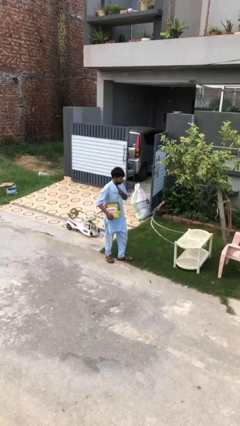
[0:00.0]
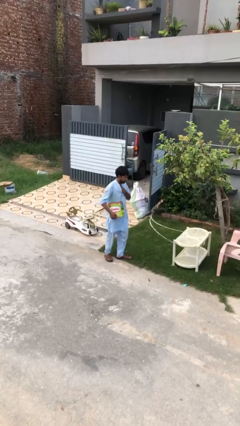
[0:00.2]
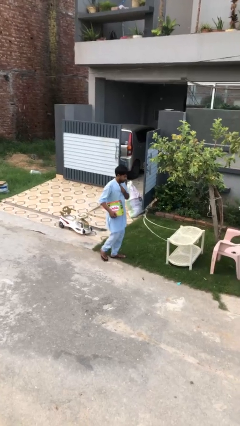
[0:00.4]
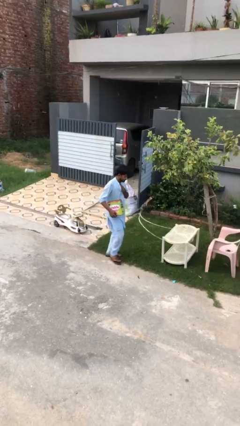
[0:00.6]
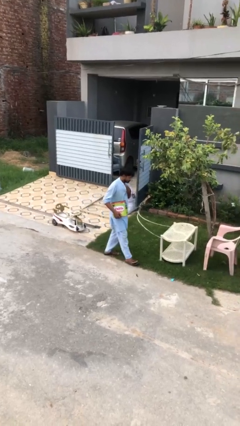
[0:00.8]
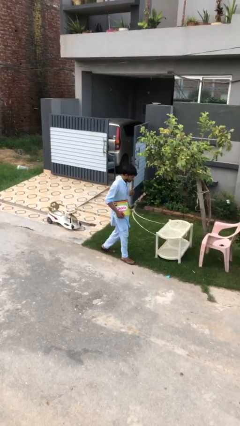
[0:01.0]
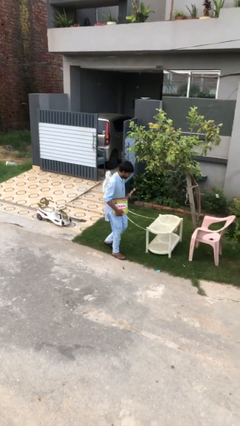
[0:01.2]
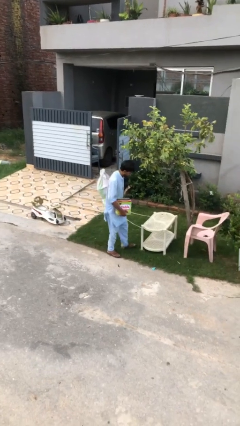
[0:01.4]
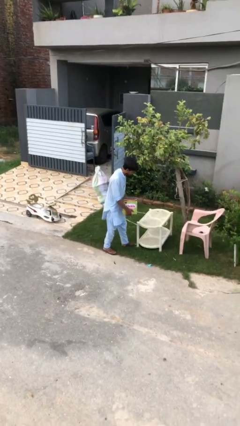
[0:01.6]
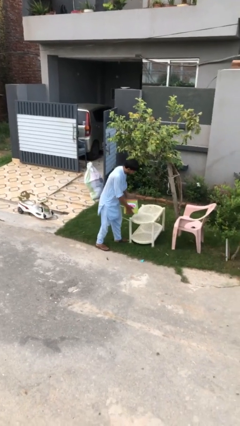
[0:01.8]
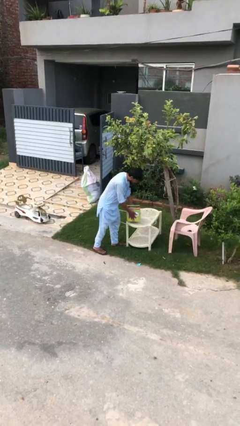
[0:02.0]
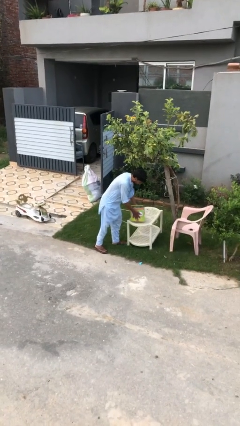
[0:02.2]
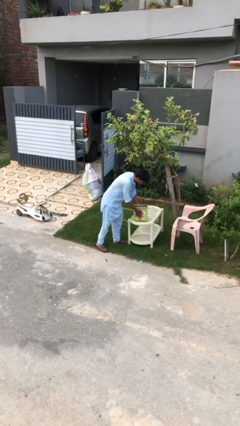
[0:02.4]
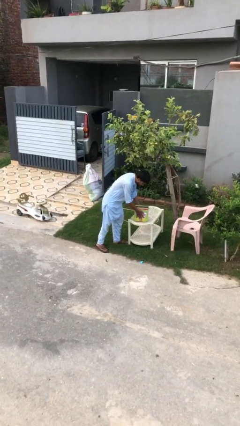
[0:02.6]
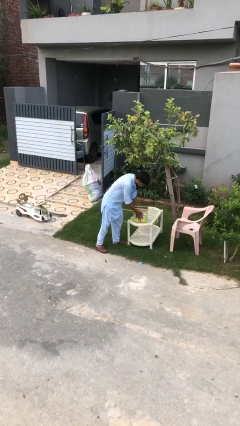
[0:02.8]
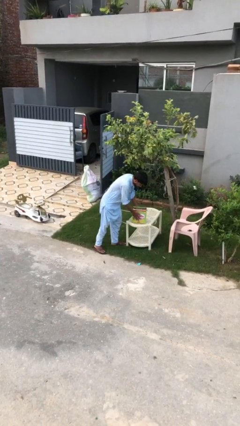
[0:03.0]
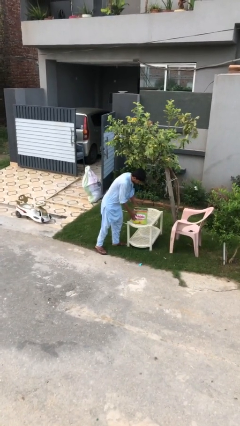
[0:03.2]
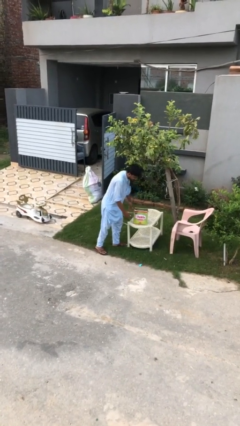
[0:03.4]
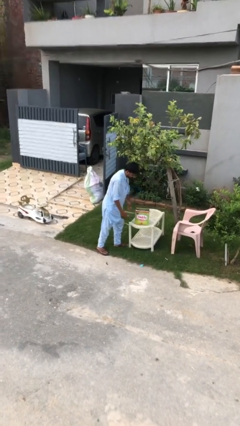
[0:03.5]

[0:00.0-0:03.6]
person puts down object on table

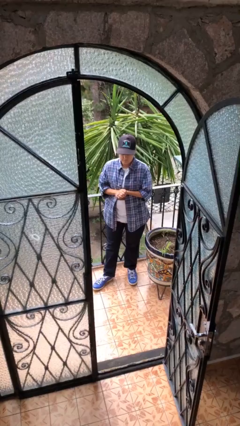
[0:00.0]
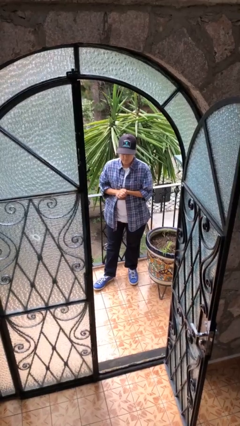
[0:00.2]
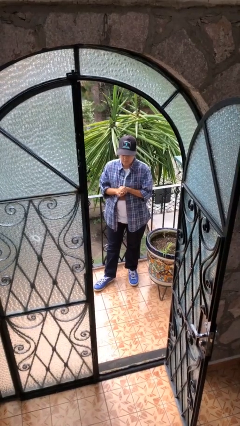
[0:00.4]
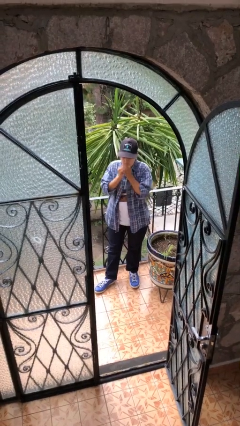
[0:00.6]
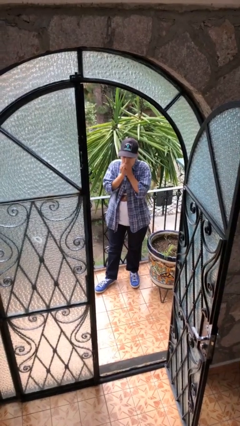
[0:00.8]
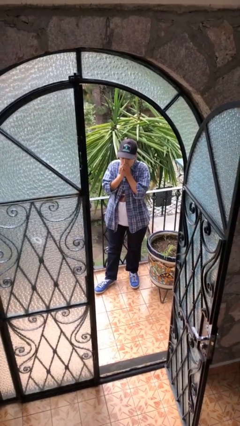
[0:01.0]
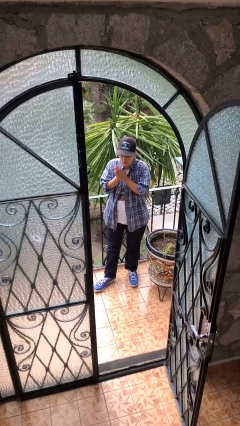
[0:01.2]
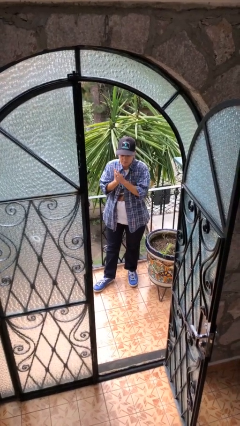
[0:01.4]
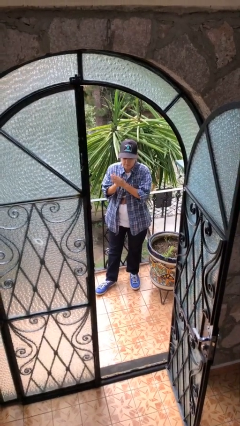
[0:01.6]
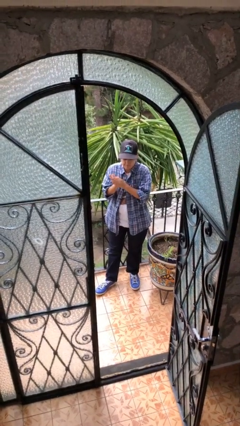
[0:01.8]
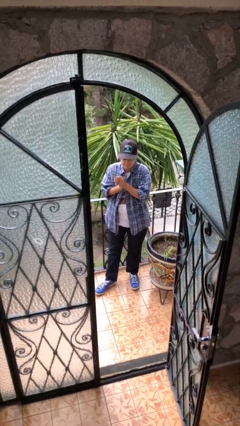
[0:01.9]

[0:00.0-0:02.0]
person blows into hands

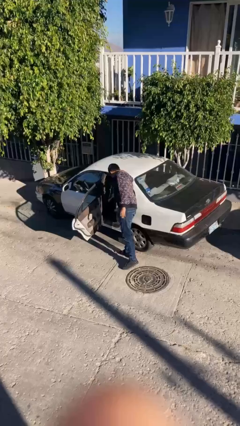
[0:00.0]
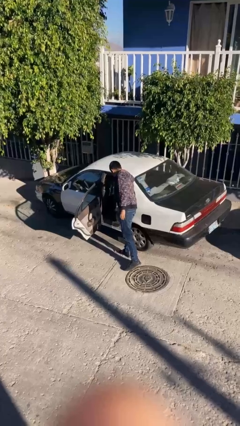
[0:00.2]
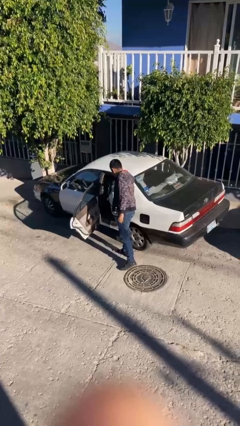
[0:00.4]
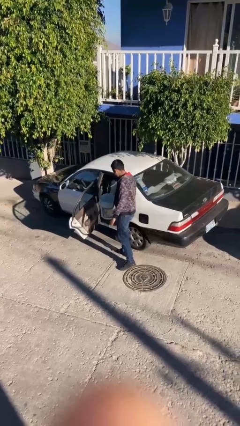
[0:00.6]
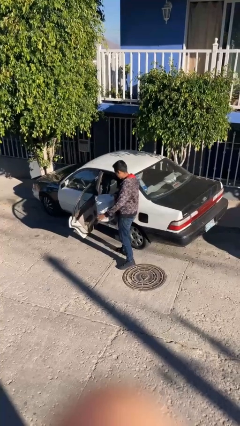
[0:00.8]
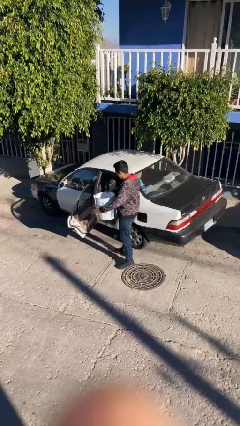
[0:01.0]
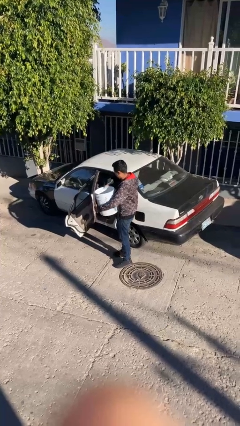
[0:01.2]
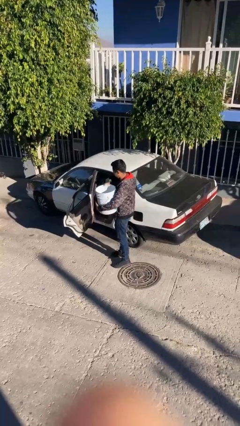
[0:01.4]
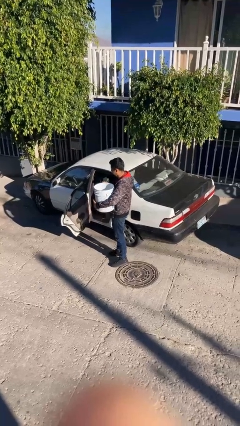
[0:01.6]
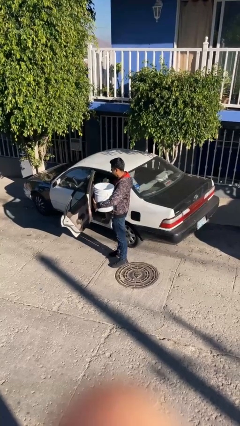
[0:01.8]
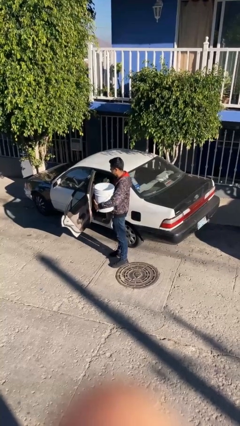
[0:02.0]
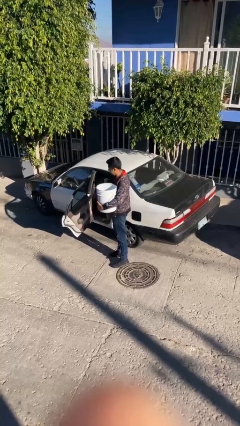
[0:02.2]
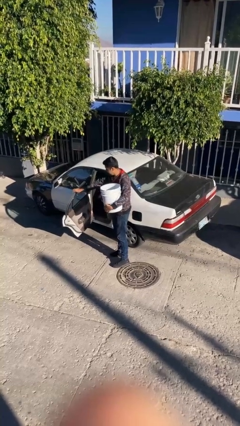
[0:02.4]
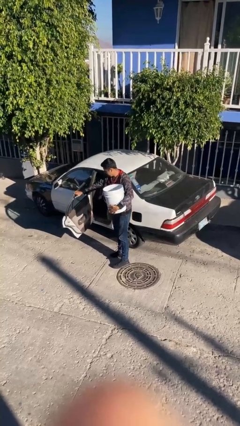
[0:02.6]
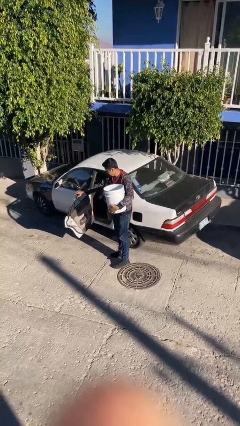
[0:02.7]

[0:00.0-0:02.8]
person unloads car

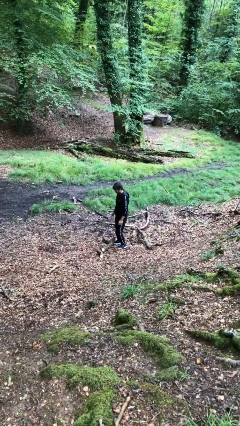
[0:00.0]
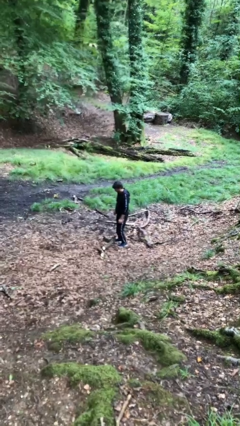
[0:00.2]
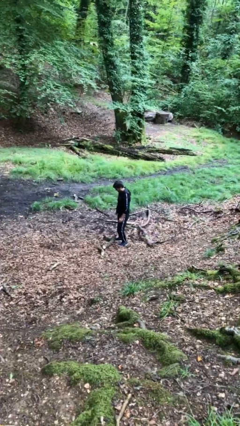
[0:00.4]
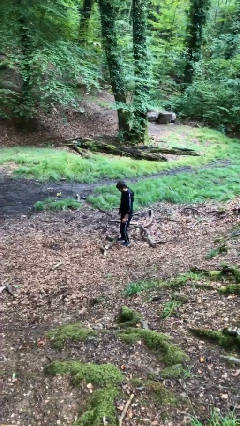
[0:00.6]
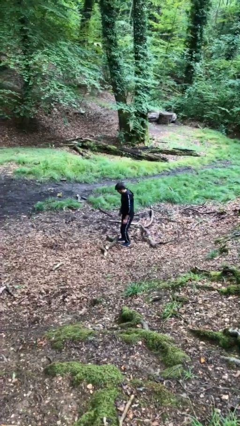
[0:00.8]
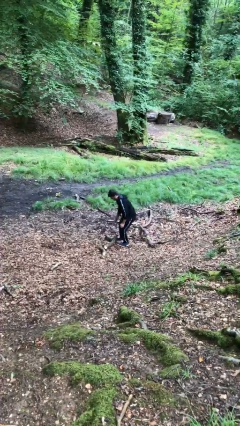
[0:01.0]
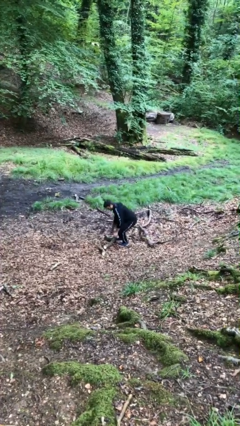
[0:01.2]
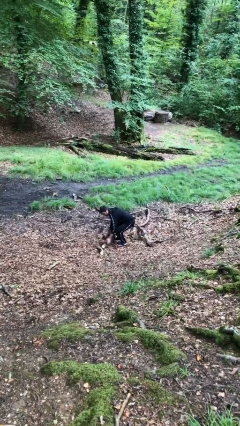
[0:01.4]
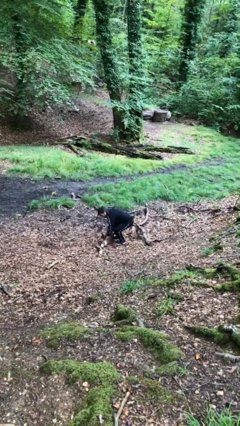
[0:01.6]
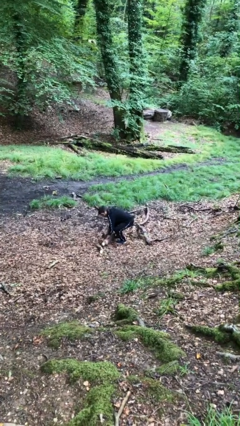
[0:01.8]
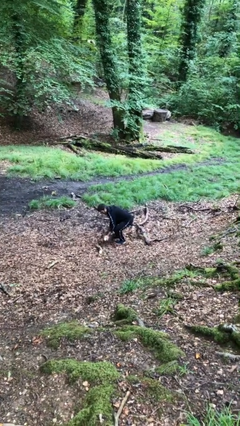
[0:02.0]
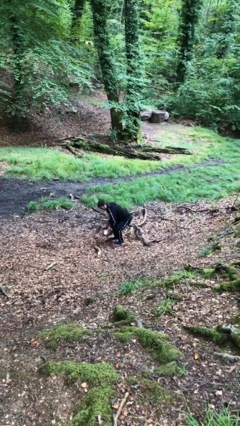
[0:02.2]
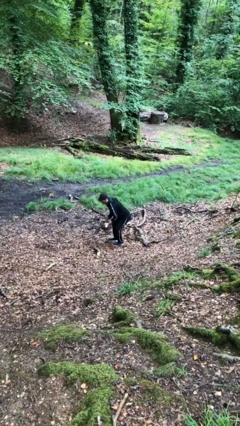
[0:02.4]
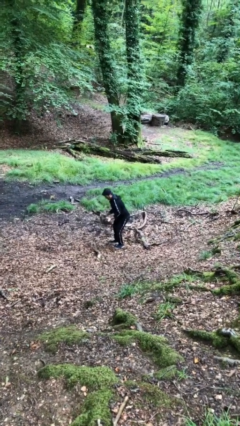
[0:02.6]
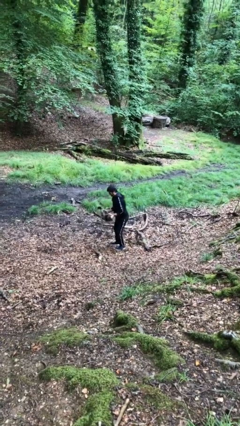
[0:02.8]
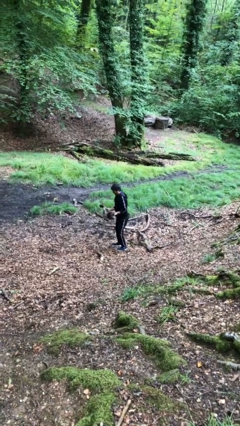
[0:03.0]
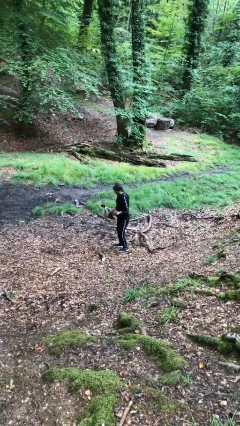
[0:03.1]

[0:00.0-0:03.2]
person picks up object from floor

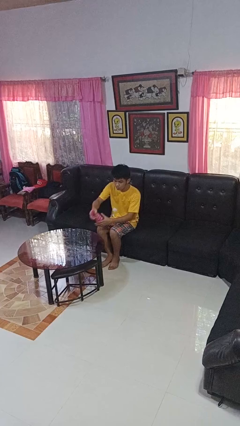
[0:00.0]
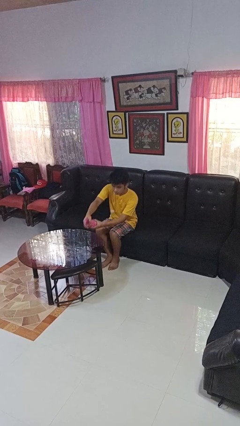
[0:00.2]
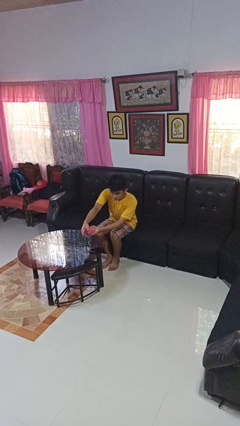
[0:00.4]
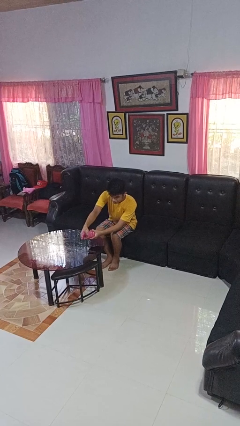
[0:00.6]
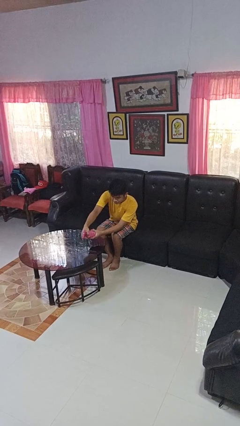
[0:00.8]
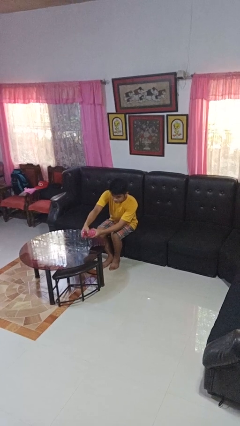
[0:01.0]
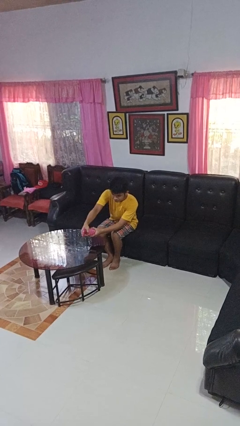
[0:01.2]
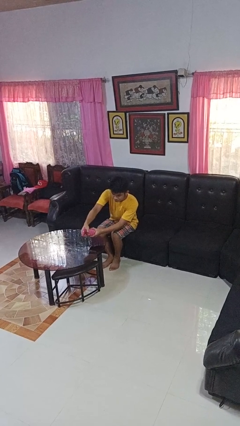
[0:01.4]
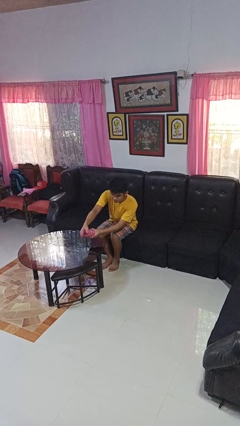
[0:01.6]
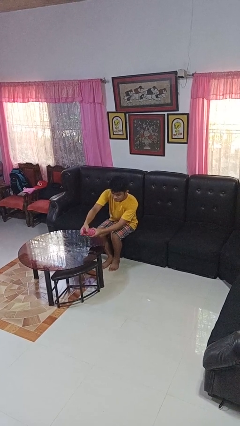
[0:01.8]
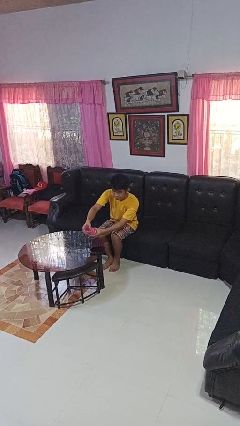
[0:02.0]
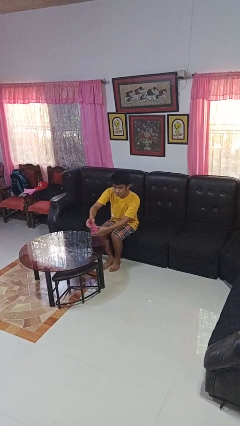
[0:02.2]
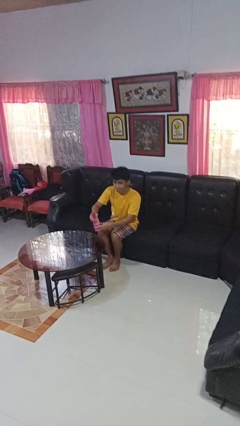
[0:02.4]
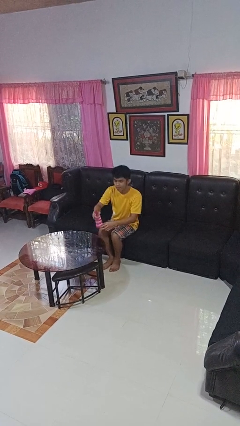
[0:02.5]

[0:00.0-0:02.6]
person sprays from bottle

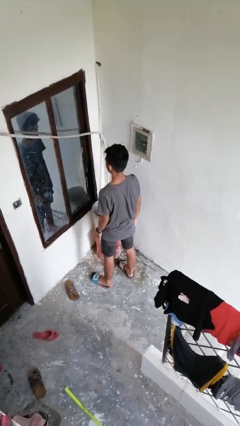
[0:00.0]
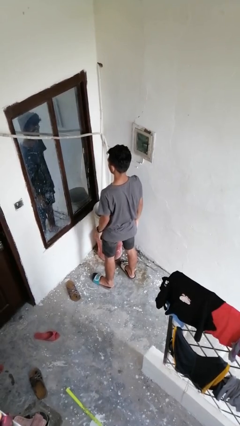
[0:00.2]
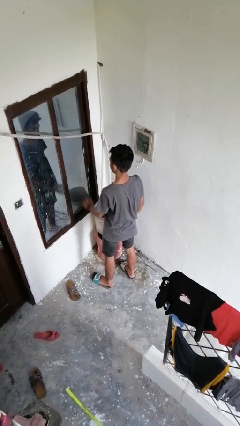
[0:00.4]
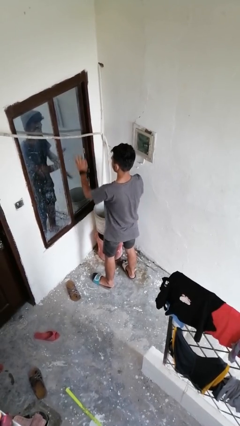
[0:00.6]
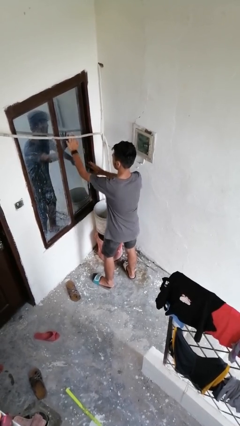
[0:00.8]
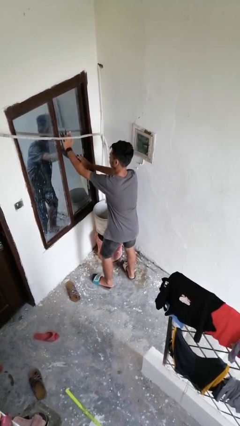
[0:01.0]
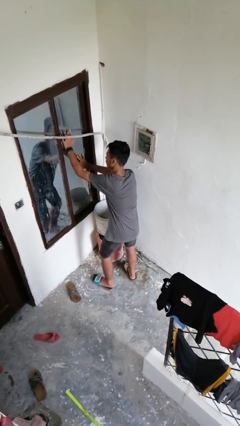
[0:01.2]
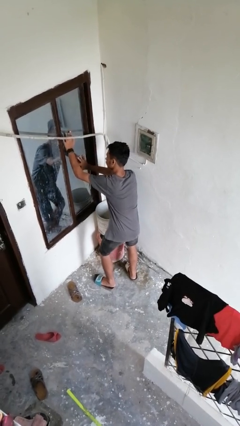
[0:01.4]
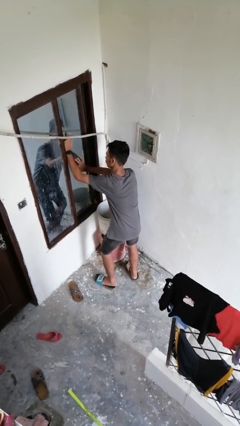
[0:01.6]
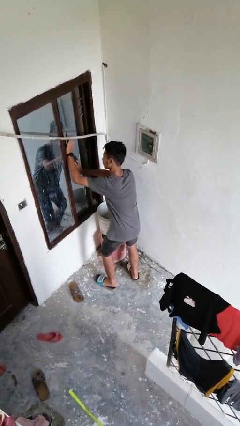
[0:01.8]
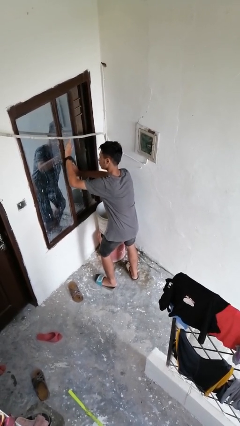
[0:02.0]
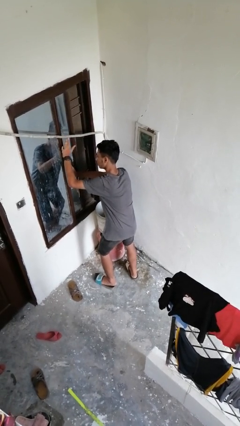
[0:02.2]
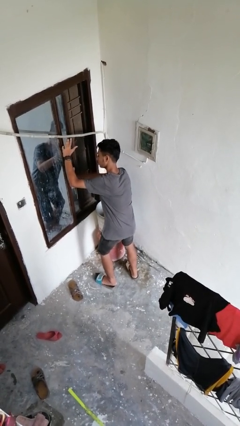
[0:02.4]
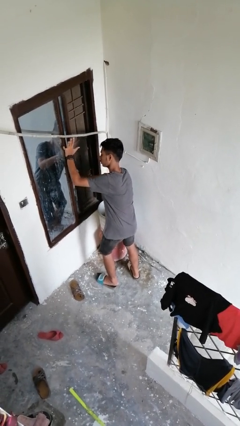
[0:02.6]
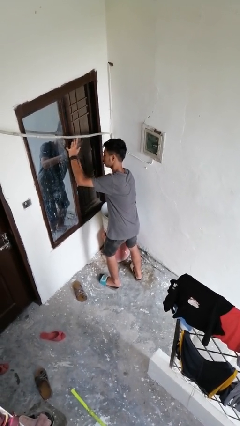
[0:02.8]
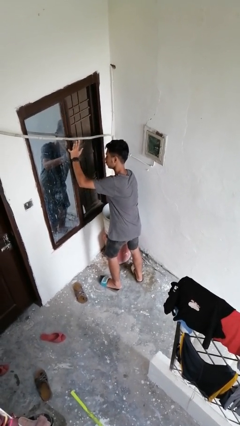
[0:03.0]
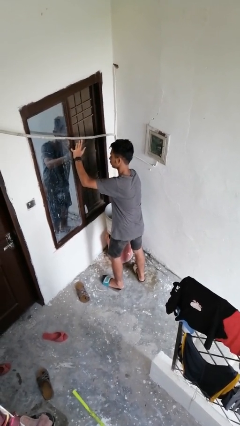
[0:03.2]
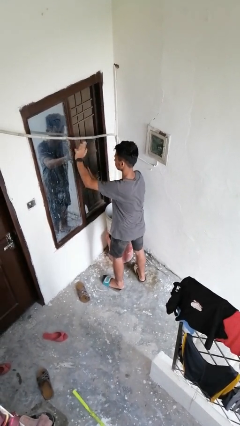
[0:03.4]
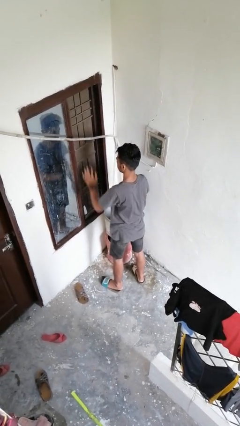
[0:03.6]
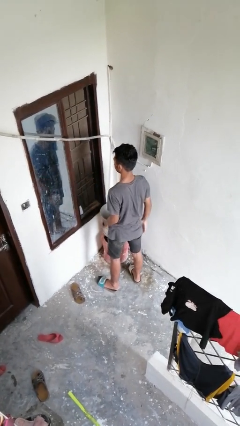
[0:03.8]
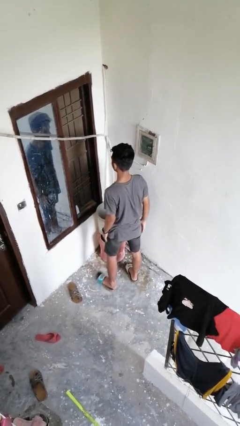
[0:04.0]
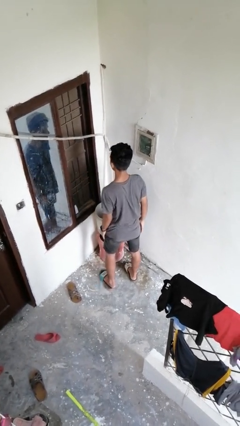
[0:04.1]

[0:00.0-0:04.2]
person opens home window
